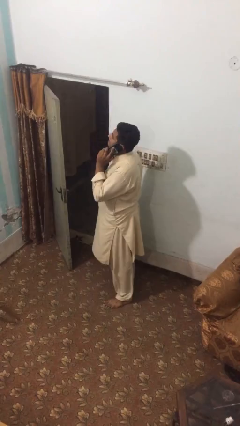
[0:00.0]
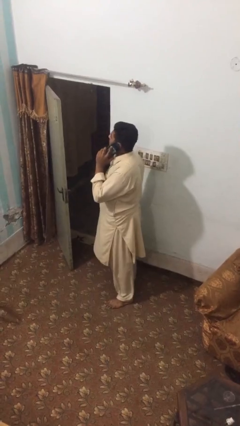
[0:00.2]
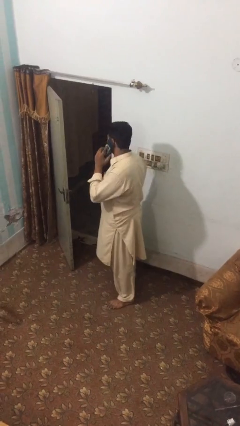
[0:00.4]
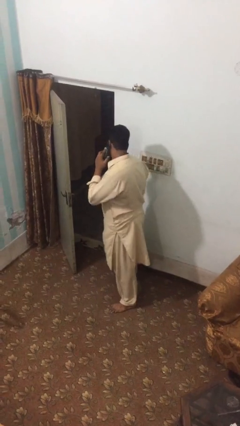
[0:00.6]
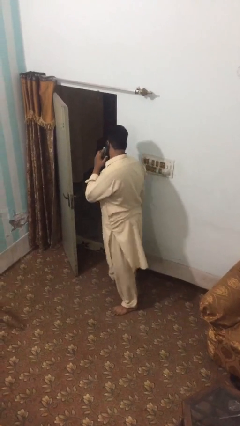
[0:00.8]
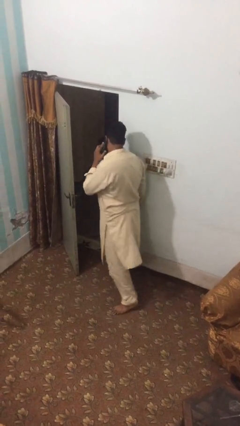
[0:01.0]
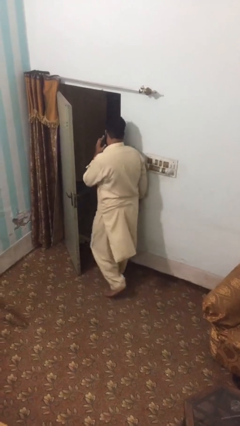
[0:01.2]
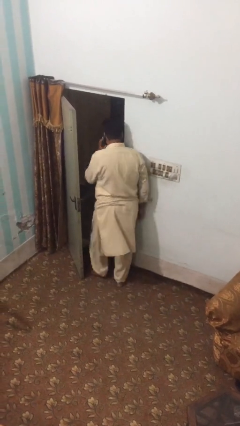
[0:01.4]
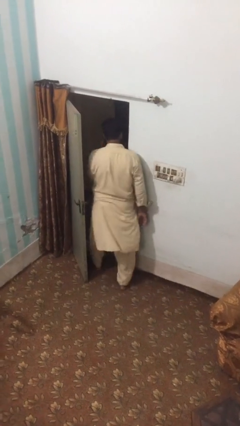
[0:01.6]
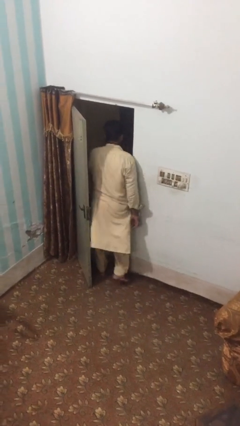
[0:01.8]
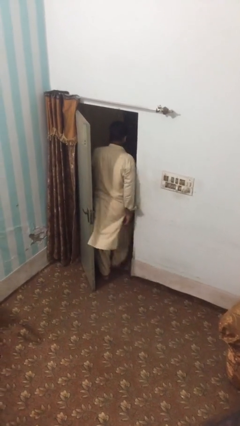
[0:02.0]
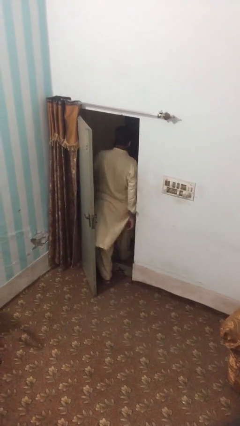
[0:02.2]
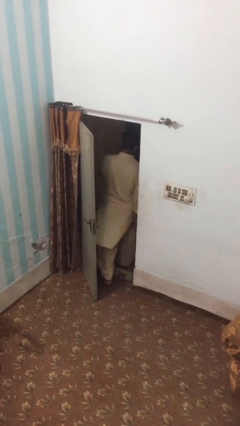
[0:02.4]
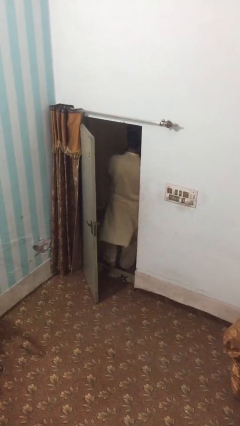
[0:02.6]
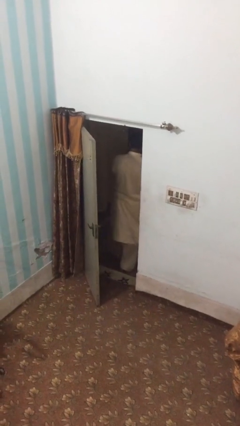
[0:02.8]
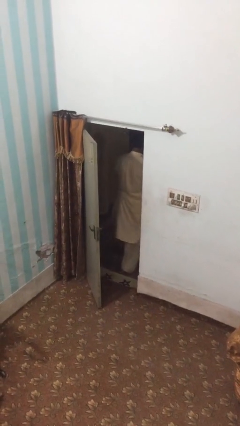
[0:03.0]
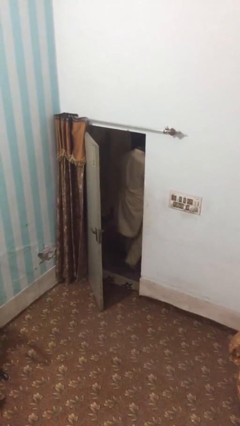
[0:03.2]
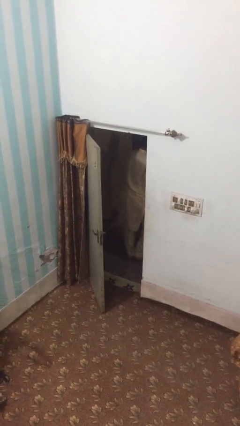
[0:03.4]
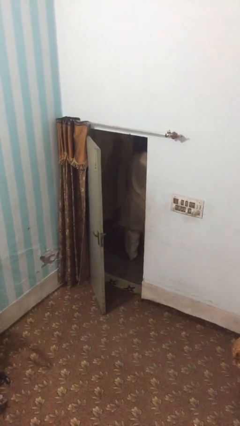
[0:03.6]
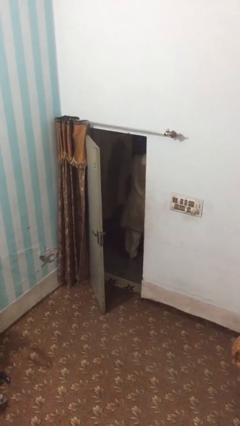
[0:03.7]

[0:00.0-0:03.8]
person exits scene through structure

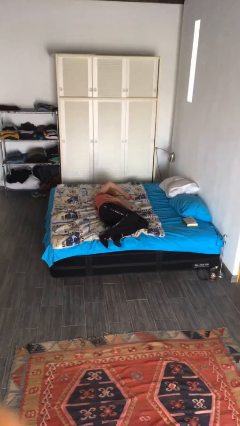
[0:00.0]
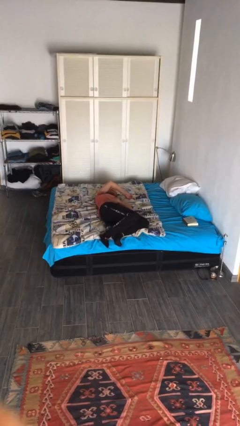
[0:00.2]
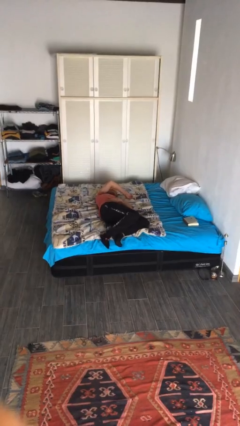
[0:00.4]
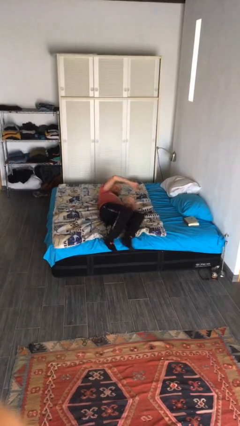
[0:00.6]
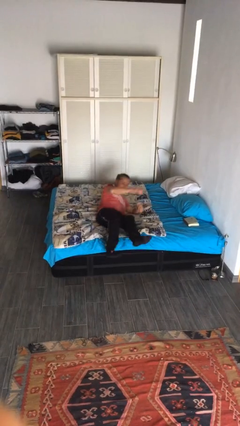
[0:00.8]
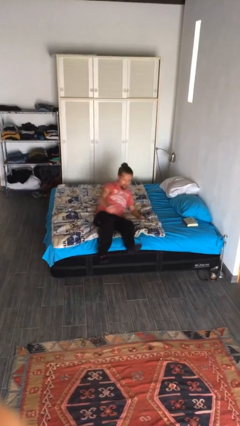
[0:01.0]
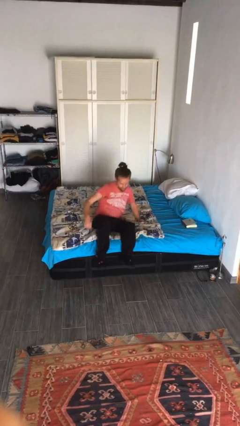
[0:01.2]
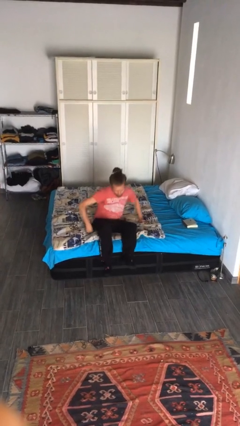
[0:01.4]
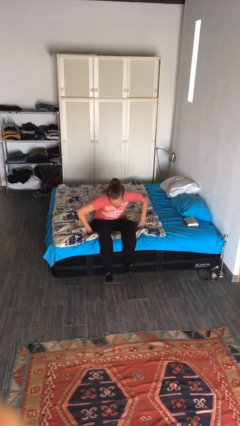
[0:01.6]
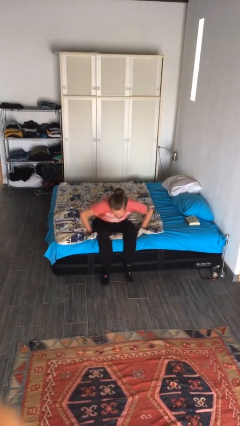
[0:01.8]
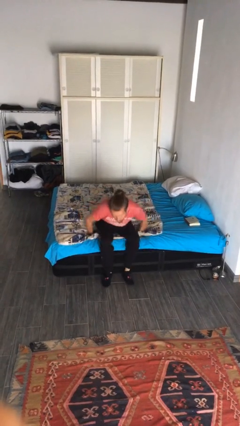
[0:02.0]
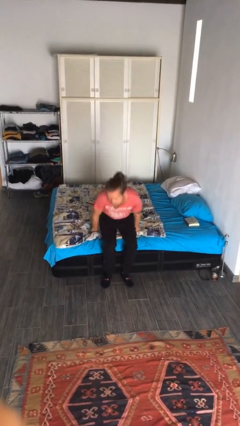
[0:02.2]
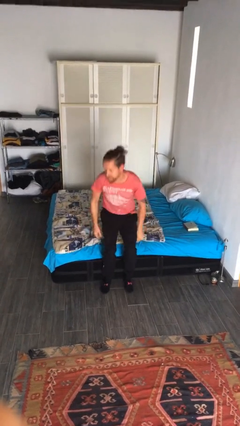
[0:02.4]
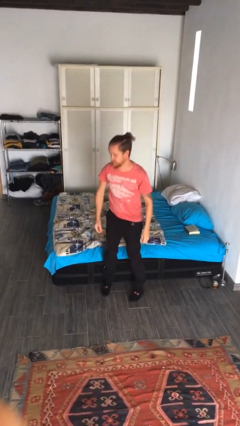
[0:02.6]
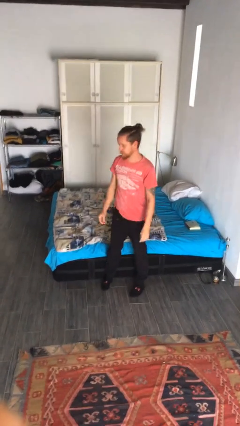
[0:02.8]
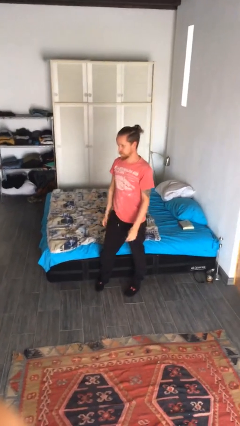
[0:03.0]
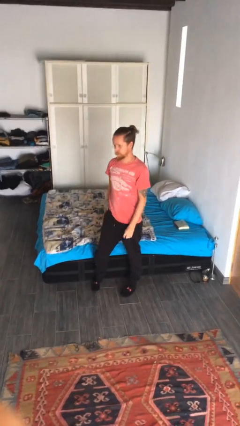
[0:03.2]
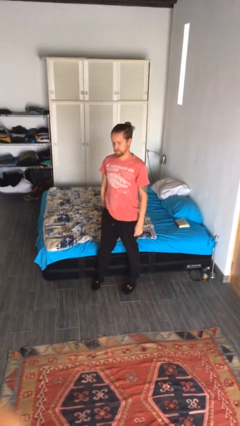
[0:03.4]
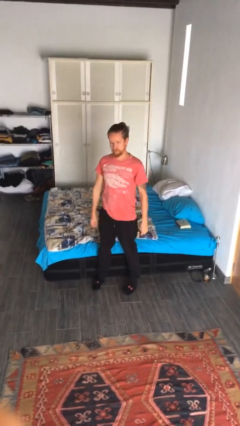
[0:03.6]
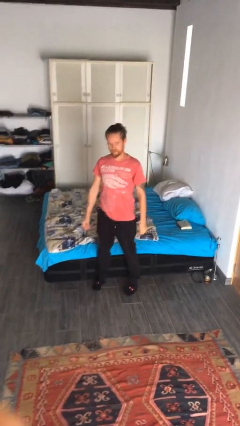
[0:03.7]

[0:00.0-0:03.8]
person stands up

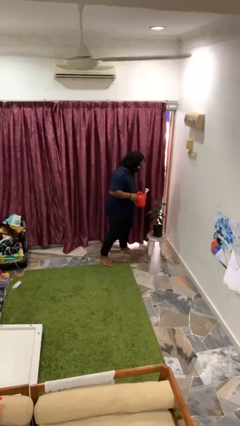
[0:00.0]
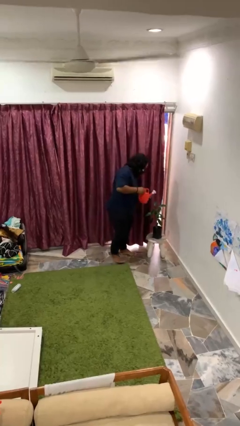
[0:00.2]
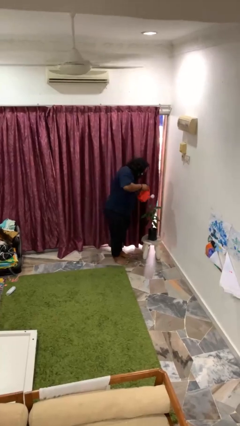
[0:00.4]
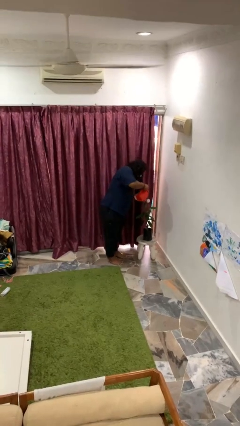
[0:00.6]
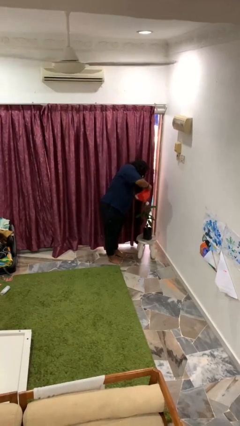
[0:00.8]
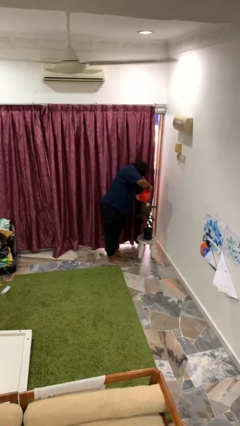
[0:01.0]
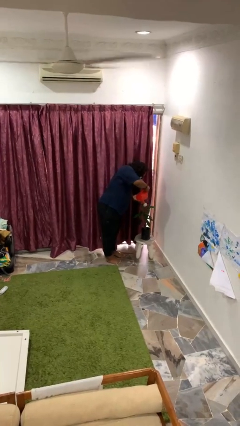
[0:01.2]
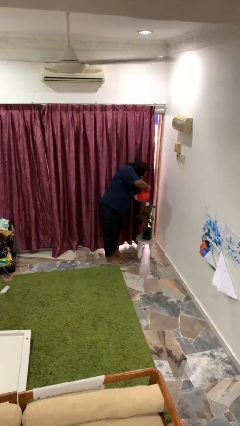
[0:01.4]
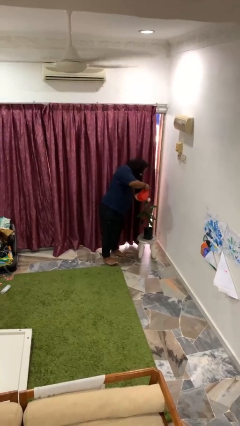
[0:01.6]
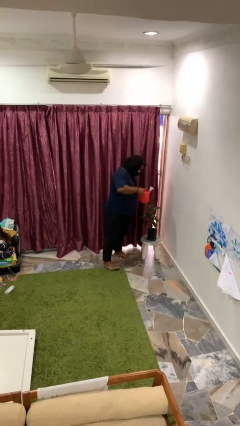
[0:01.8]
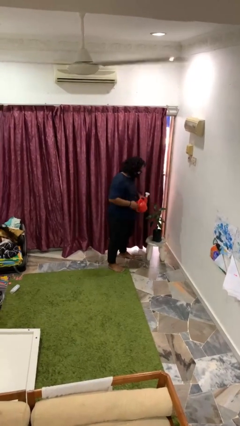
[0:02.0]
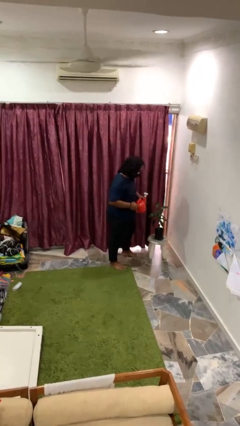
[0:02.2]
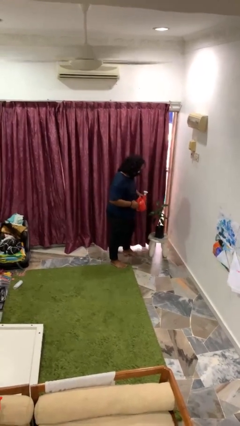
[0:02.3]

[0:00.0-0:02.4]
person waters houseplant

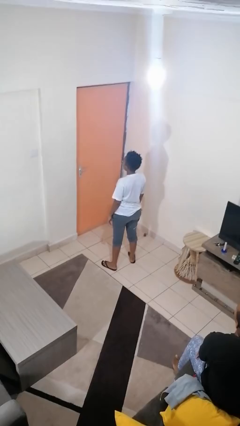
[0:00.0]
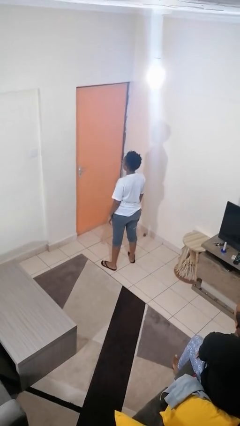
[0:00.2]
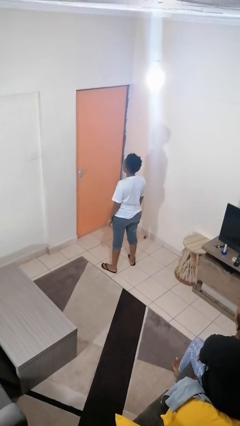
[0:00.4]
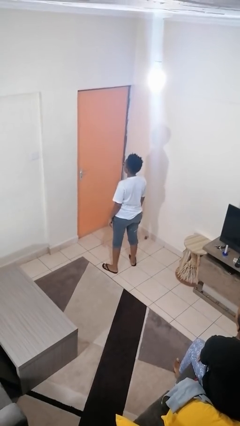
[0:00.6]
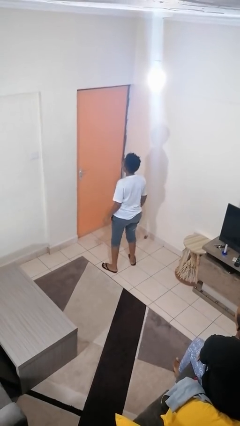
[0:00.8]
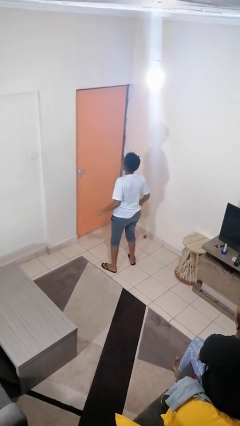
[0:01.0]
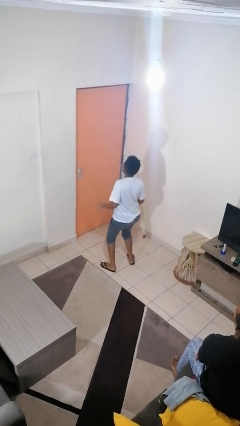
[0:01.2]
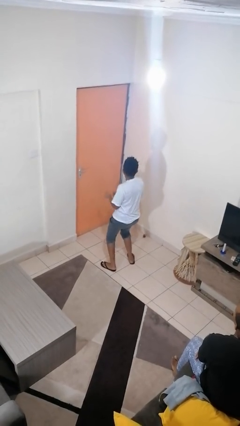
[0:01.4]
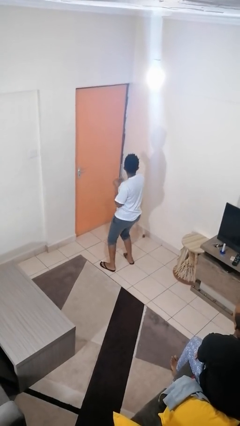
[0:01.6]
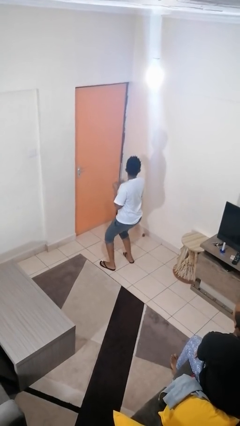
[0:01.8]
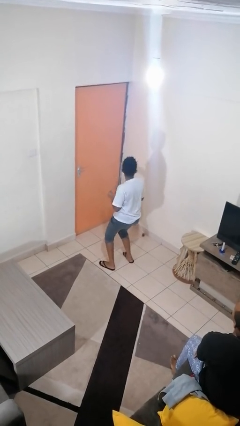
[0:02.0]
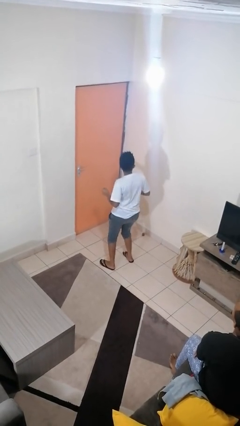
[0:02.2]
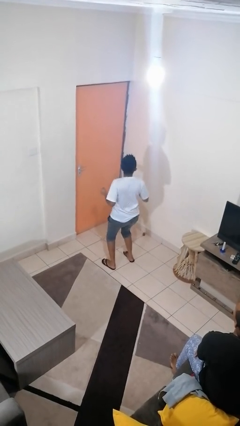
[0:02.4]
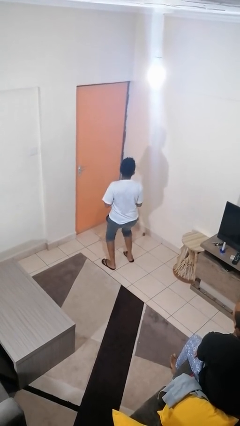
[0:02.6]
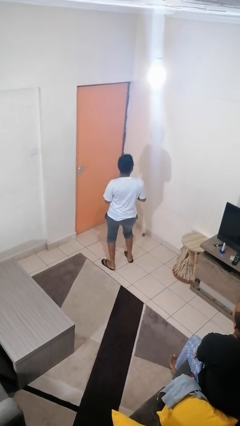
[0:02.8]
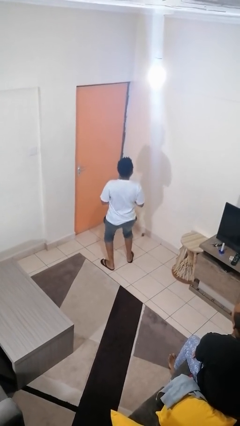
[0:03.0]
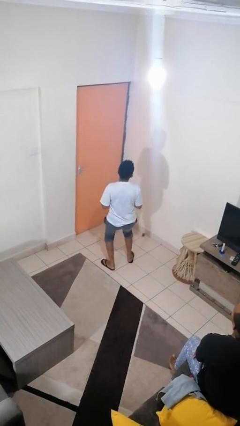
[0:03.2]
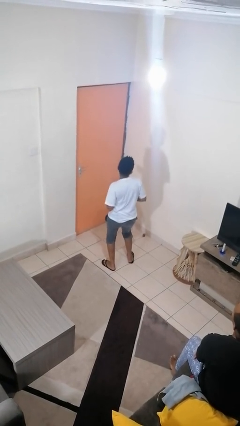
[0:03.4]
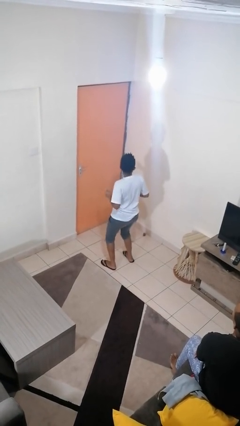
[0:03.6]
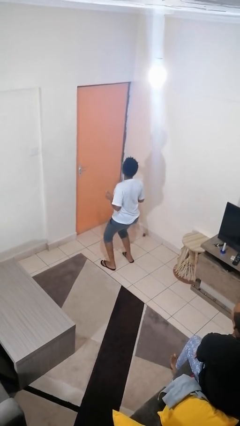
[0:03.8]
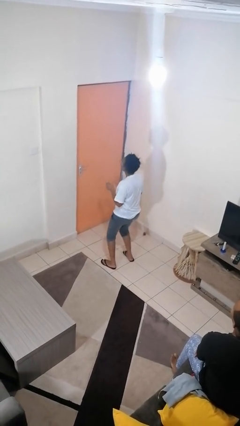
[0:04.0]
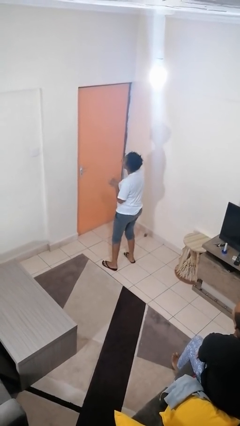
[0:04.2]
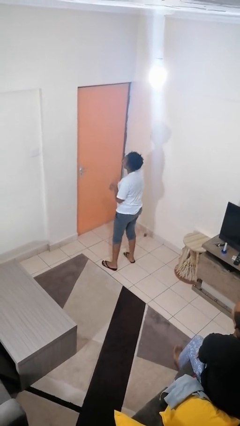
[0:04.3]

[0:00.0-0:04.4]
person dances in place

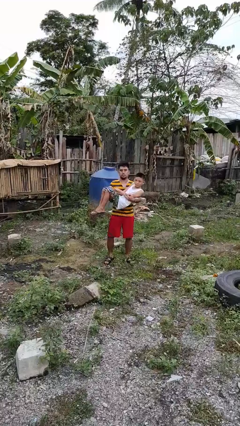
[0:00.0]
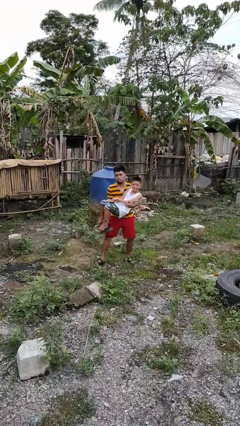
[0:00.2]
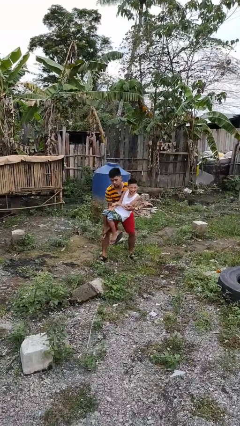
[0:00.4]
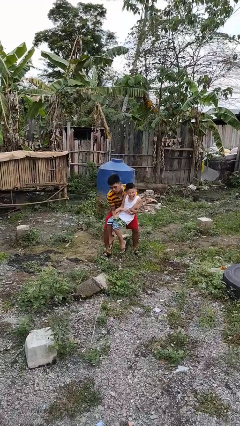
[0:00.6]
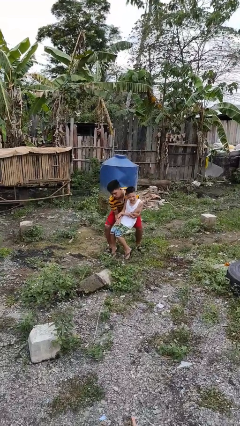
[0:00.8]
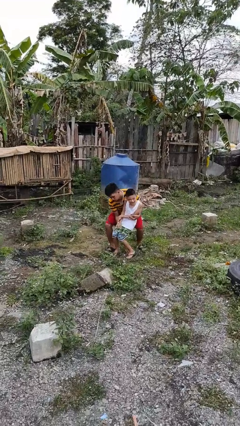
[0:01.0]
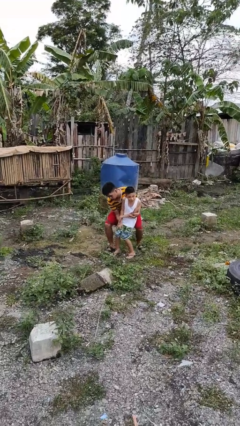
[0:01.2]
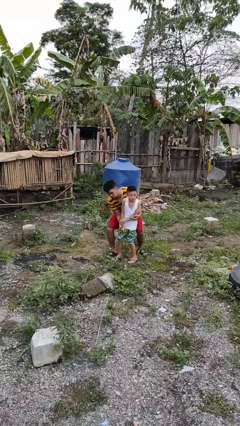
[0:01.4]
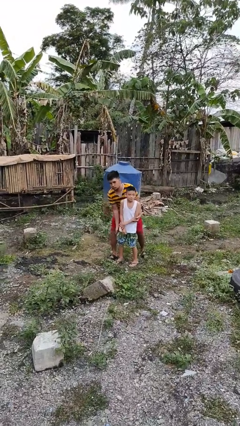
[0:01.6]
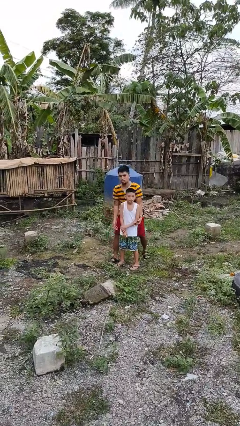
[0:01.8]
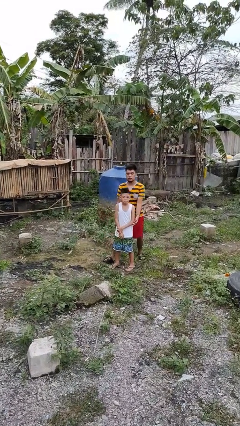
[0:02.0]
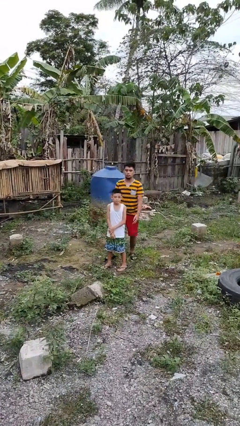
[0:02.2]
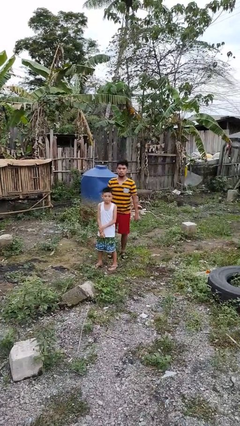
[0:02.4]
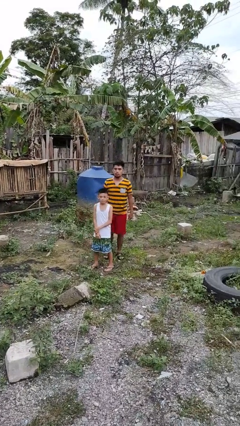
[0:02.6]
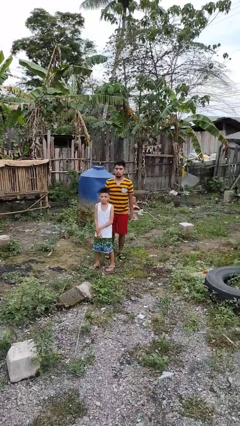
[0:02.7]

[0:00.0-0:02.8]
person puts down person

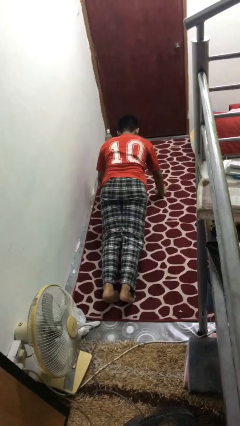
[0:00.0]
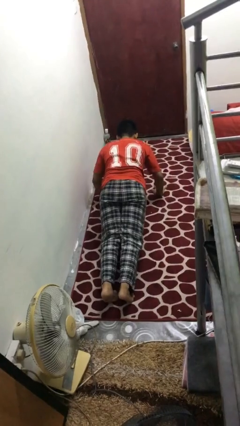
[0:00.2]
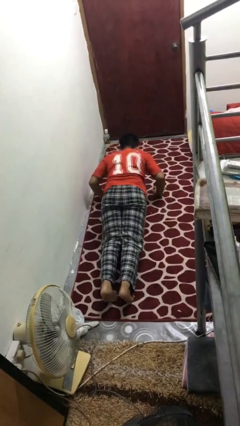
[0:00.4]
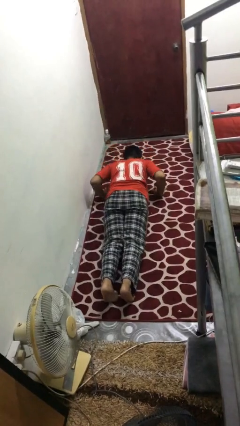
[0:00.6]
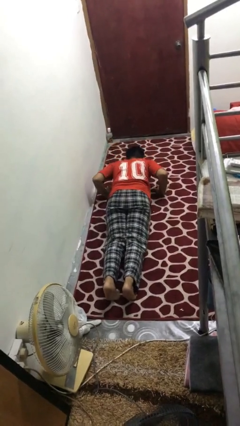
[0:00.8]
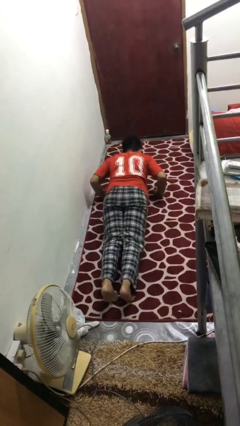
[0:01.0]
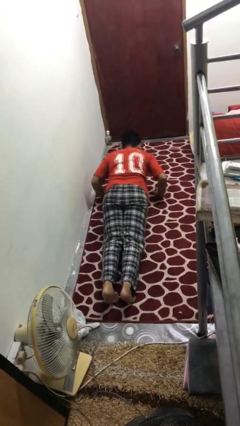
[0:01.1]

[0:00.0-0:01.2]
person exercises with pushup
